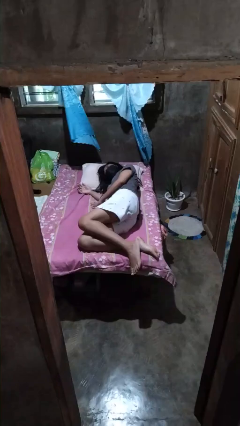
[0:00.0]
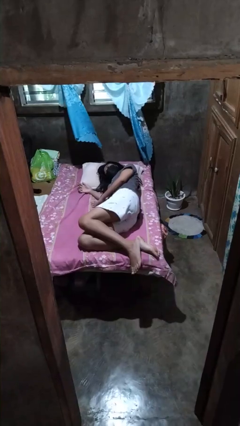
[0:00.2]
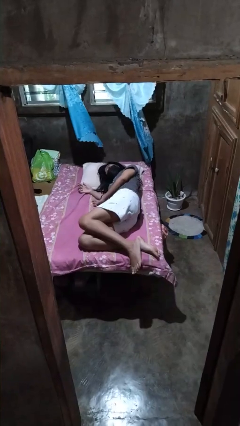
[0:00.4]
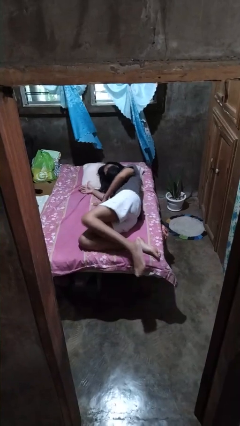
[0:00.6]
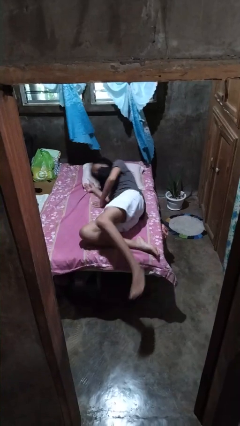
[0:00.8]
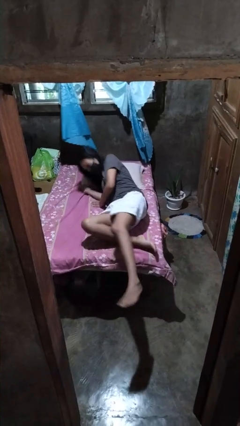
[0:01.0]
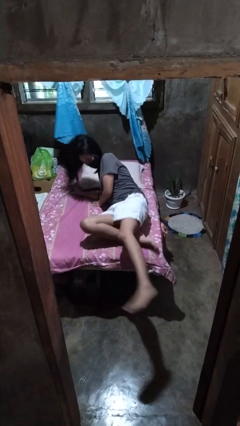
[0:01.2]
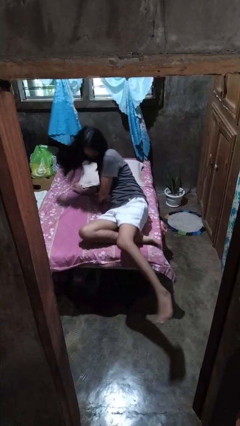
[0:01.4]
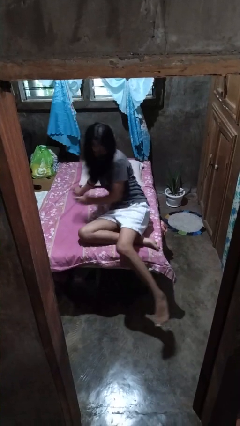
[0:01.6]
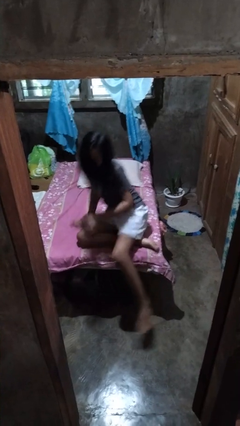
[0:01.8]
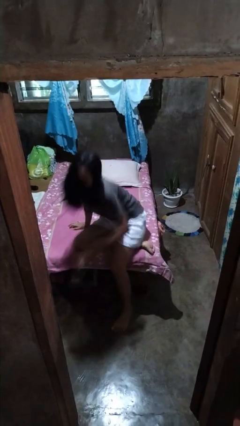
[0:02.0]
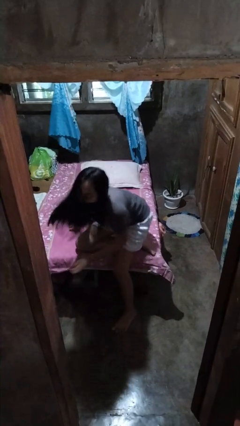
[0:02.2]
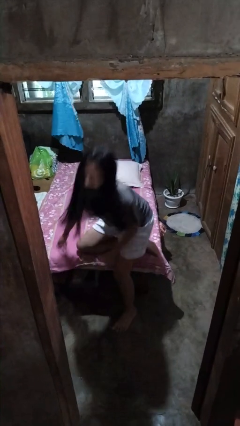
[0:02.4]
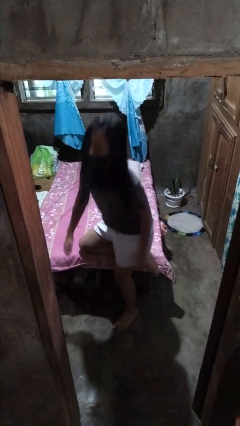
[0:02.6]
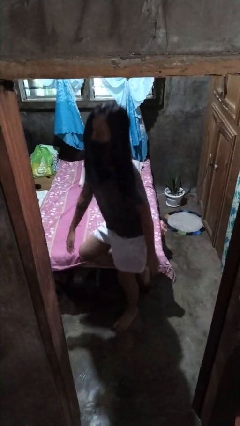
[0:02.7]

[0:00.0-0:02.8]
person stands up

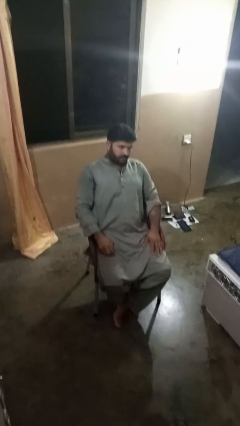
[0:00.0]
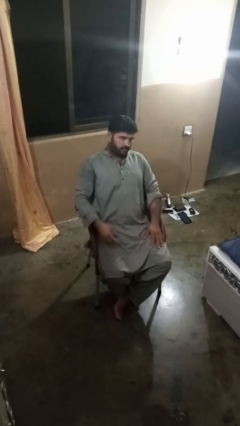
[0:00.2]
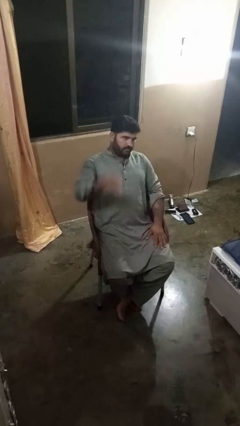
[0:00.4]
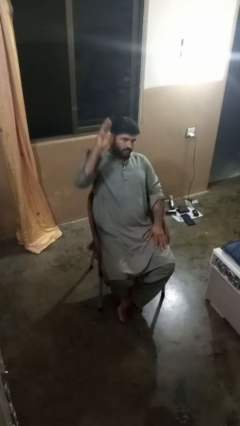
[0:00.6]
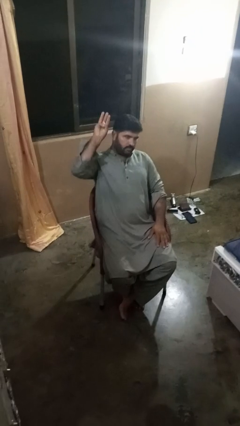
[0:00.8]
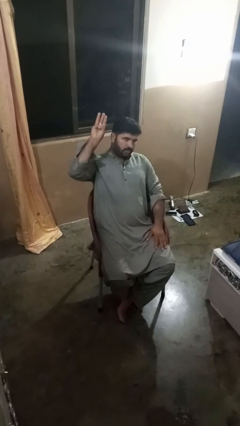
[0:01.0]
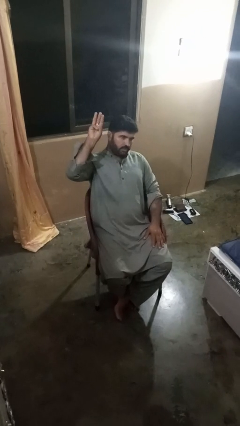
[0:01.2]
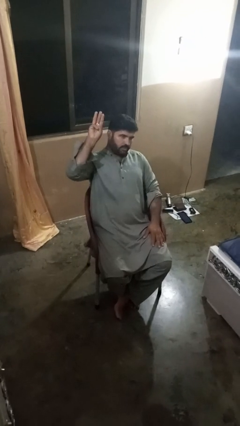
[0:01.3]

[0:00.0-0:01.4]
person gestures number three

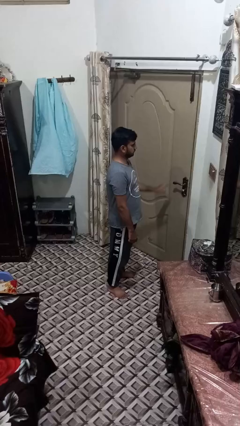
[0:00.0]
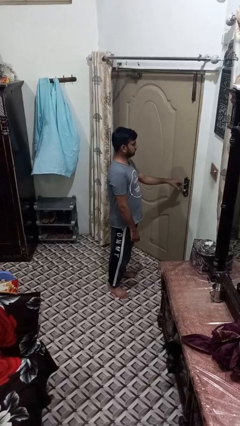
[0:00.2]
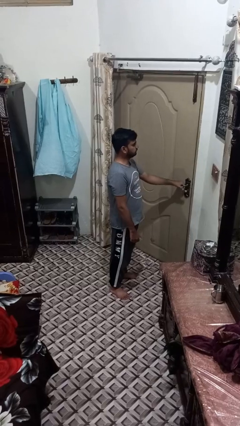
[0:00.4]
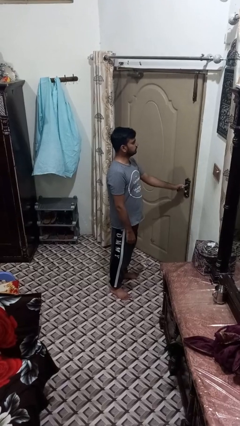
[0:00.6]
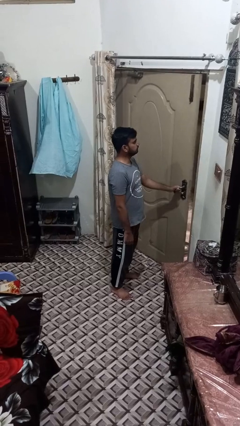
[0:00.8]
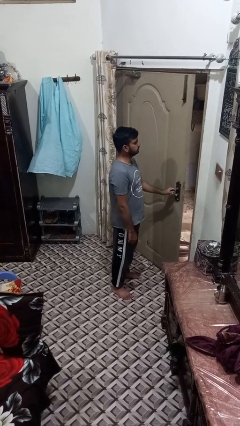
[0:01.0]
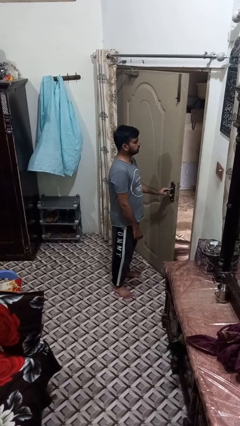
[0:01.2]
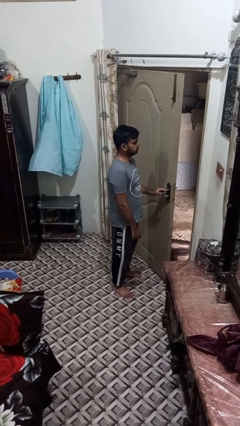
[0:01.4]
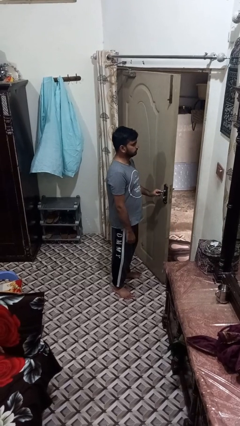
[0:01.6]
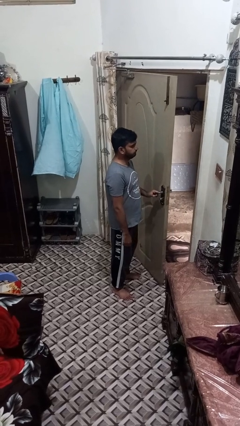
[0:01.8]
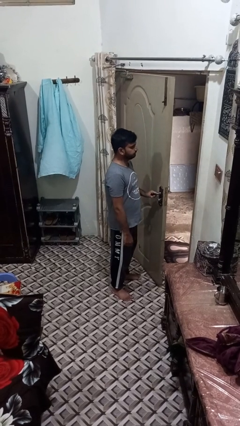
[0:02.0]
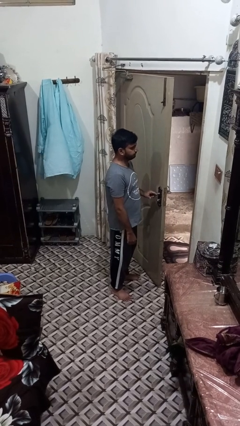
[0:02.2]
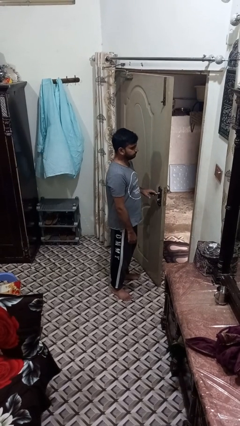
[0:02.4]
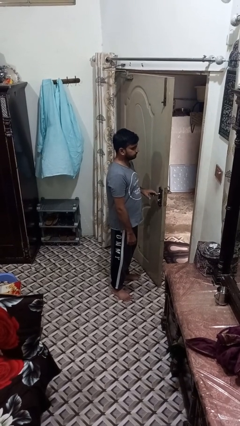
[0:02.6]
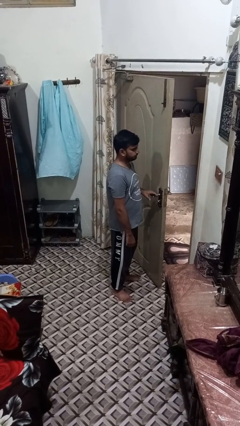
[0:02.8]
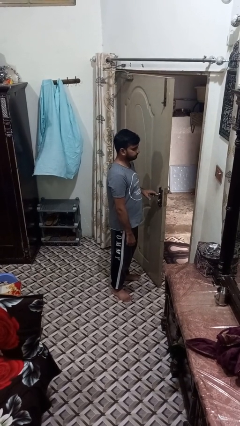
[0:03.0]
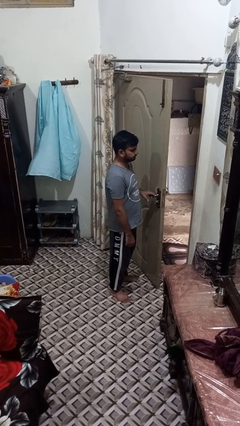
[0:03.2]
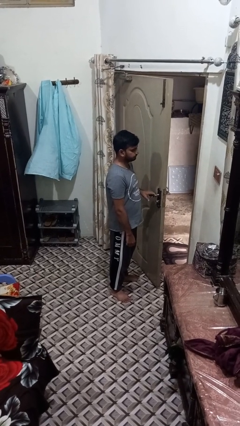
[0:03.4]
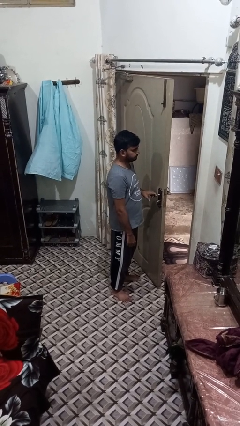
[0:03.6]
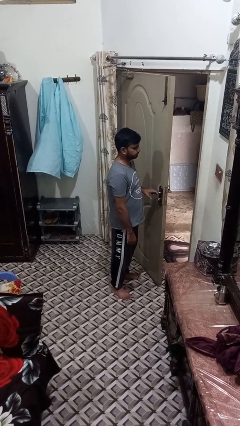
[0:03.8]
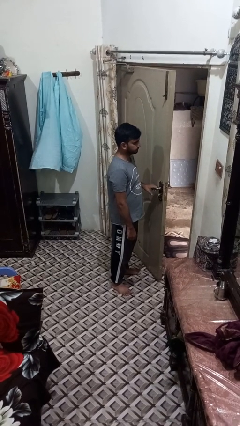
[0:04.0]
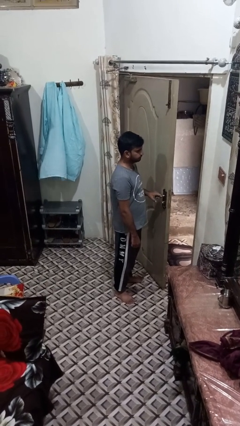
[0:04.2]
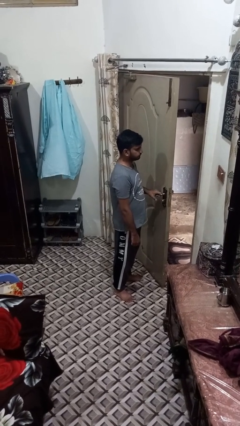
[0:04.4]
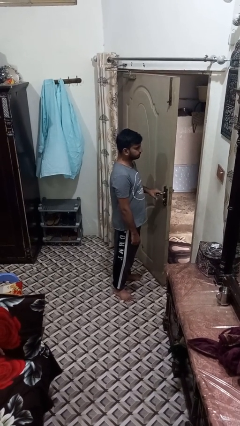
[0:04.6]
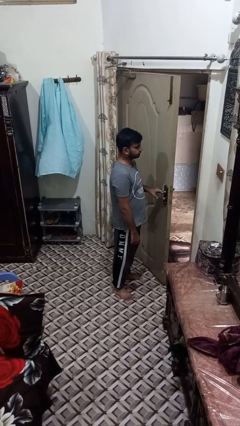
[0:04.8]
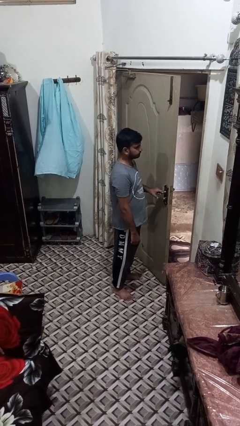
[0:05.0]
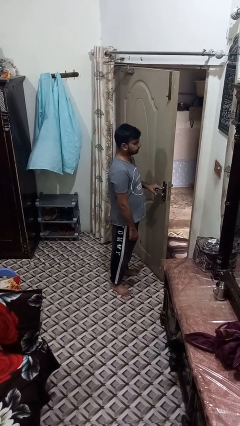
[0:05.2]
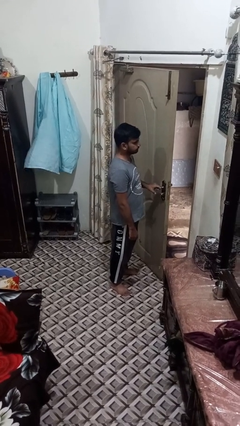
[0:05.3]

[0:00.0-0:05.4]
person opens gate

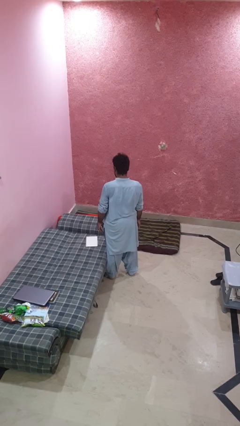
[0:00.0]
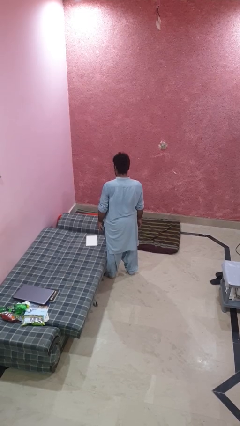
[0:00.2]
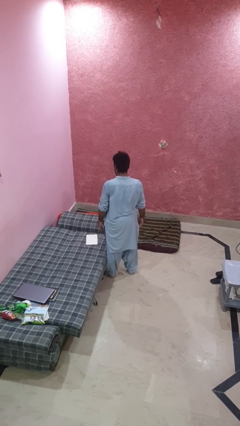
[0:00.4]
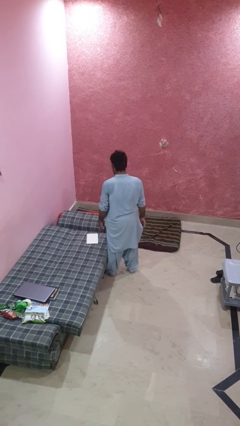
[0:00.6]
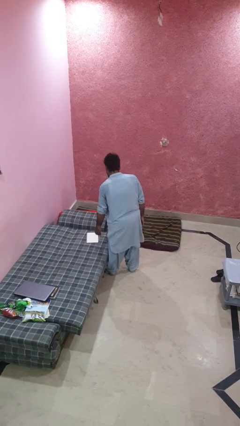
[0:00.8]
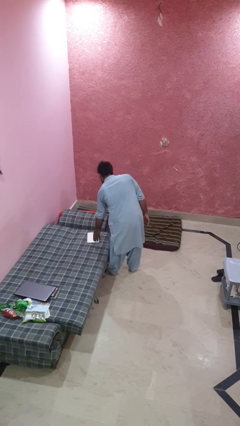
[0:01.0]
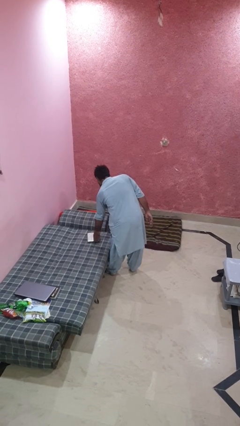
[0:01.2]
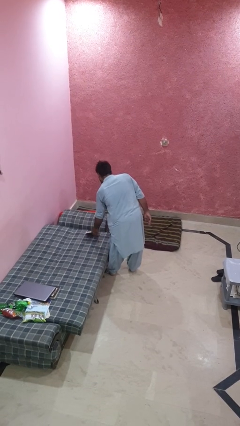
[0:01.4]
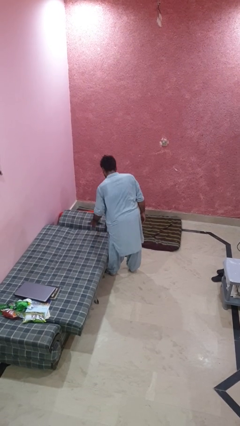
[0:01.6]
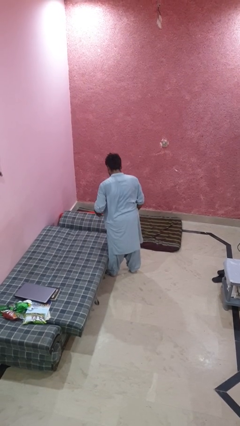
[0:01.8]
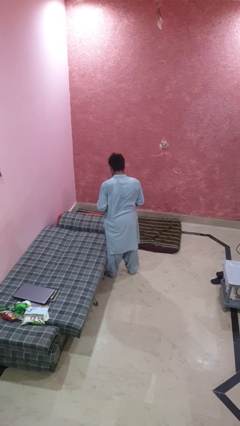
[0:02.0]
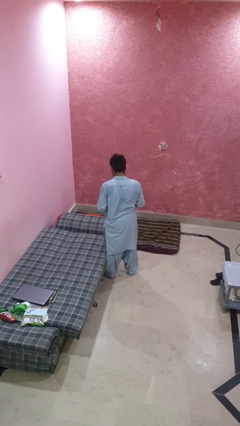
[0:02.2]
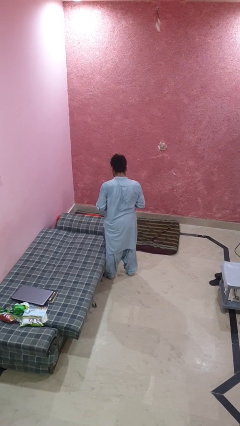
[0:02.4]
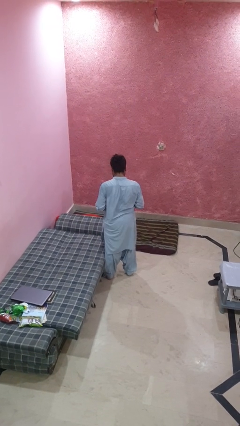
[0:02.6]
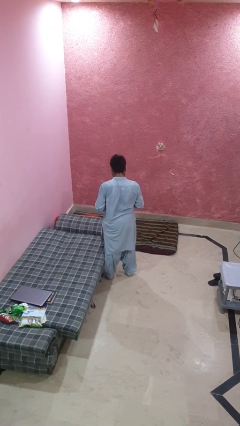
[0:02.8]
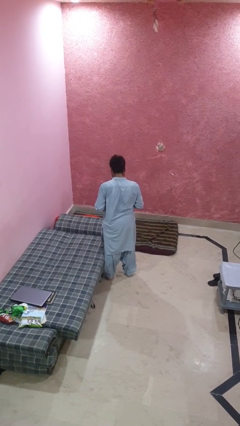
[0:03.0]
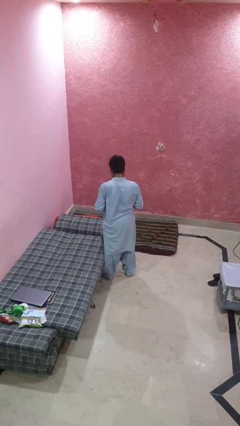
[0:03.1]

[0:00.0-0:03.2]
person picks up object from bed

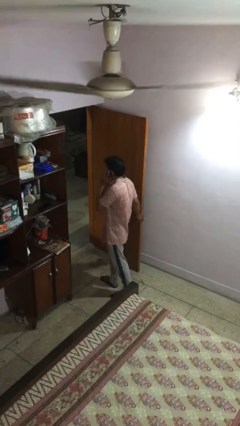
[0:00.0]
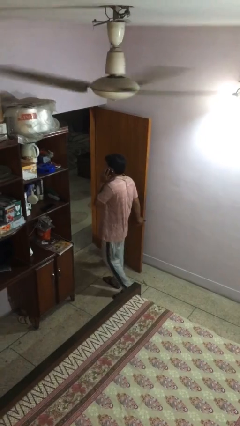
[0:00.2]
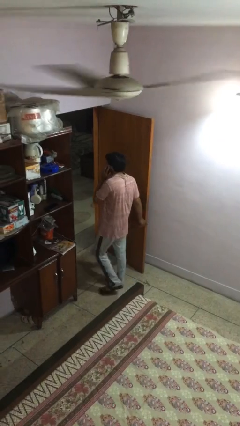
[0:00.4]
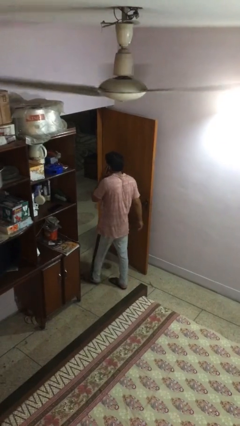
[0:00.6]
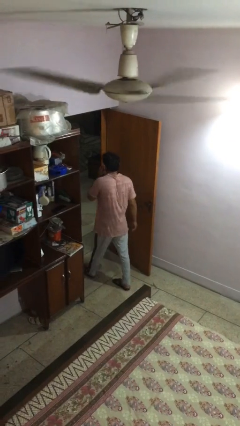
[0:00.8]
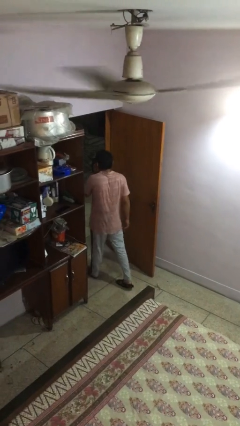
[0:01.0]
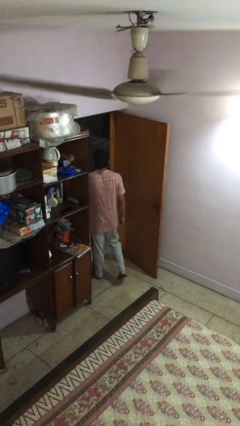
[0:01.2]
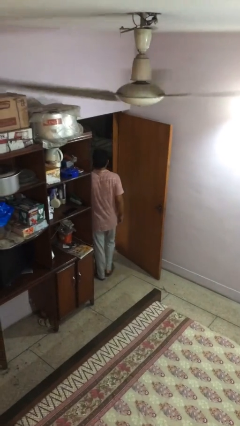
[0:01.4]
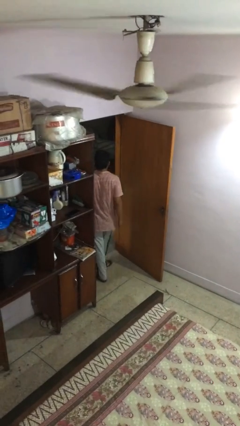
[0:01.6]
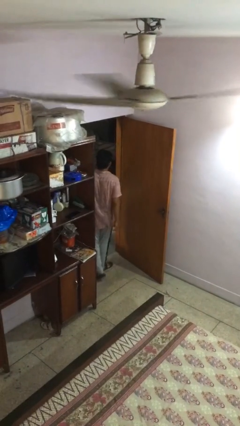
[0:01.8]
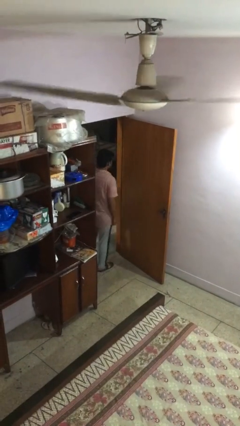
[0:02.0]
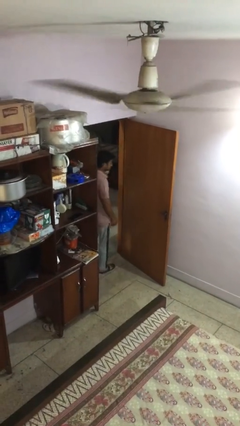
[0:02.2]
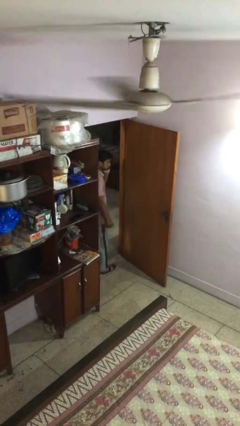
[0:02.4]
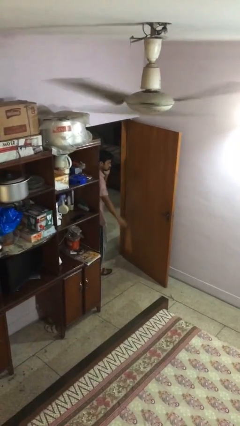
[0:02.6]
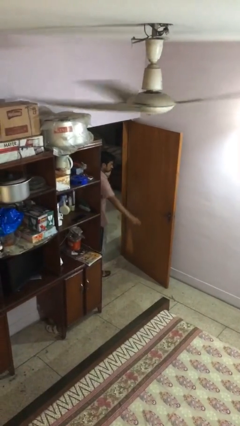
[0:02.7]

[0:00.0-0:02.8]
person exits scene through structure

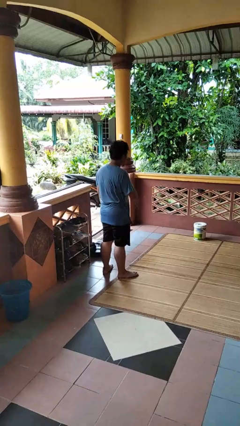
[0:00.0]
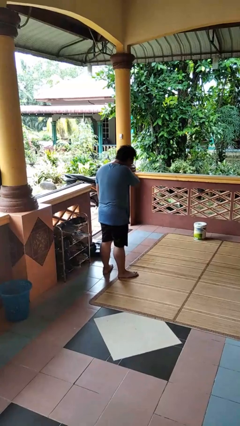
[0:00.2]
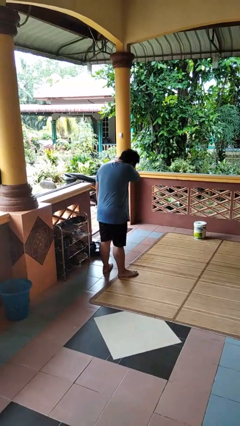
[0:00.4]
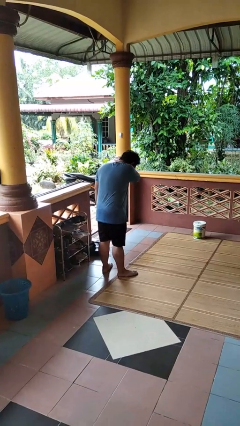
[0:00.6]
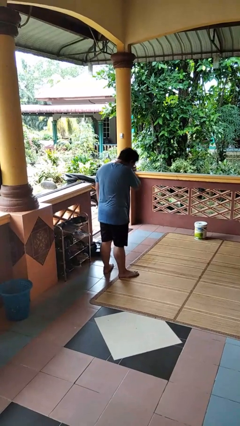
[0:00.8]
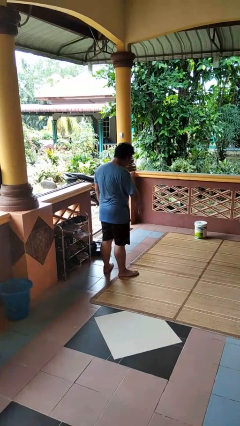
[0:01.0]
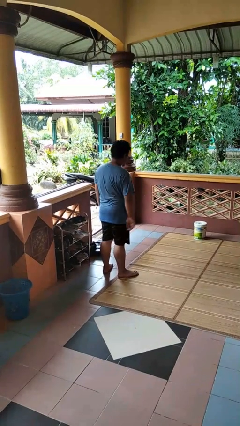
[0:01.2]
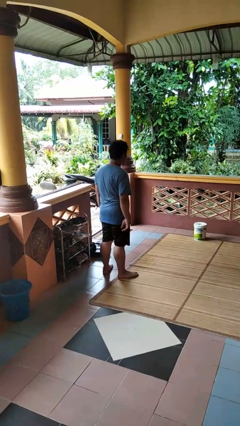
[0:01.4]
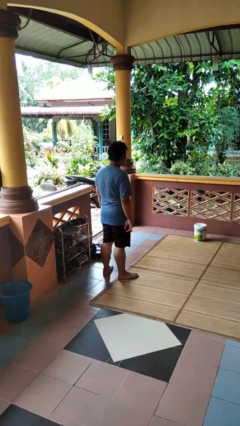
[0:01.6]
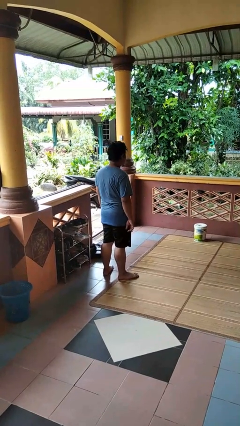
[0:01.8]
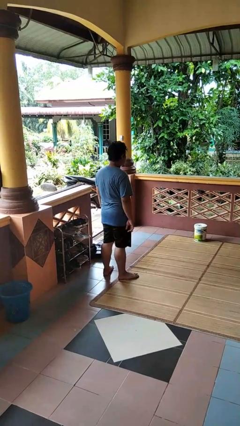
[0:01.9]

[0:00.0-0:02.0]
person sneezes into hand
